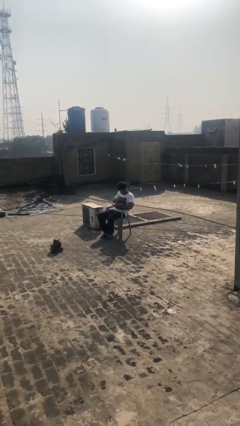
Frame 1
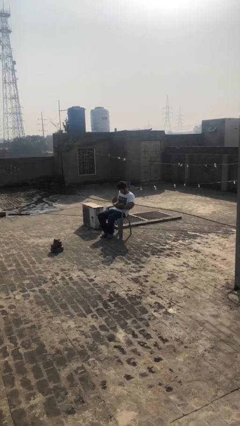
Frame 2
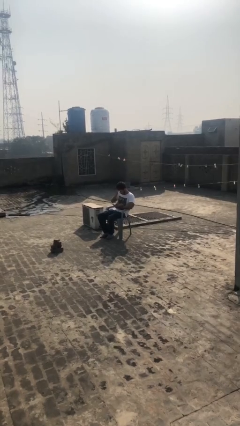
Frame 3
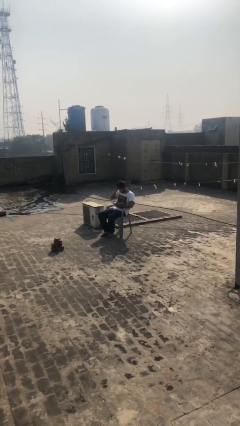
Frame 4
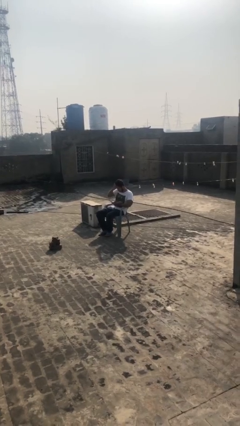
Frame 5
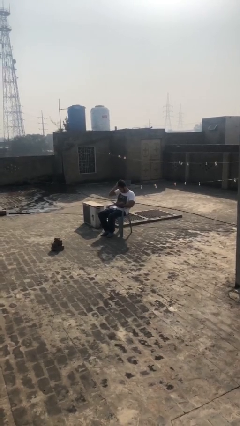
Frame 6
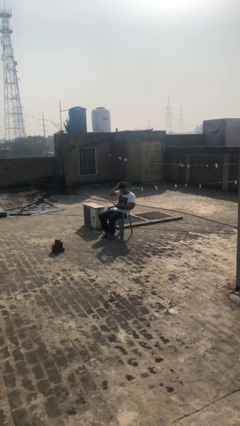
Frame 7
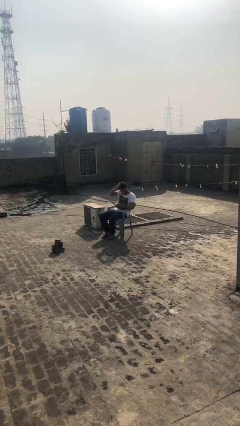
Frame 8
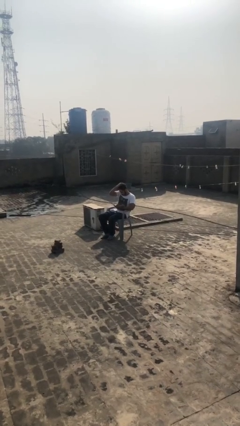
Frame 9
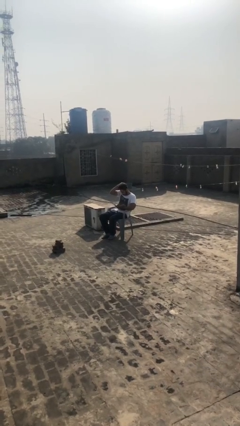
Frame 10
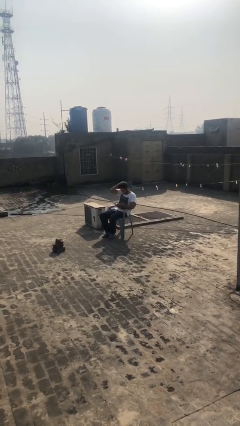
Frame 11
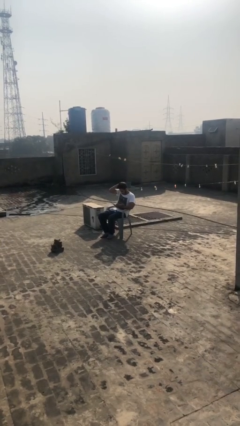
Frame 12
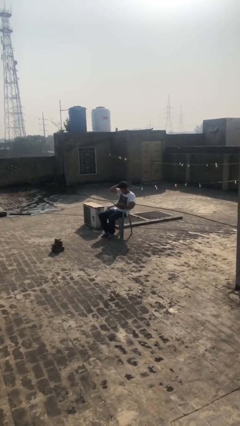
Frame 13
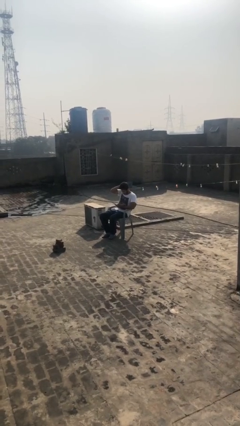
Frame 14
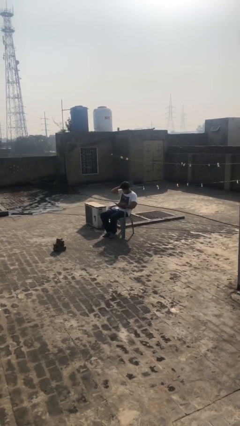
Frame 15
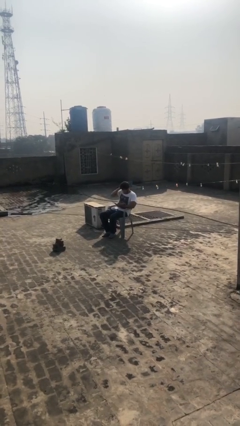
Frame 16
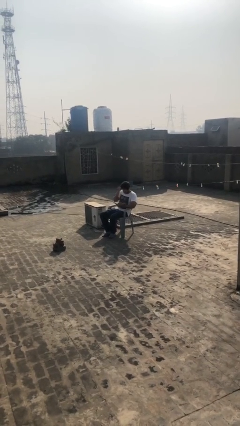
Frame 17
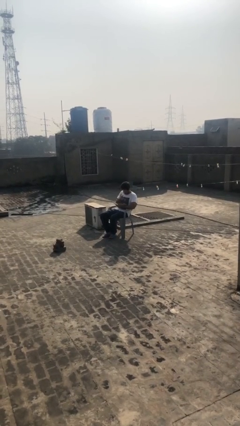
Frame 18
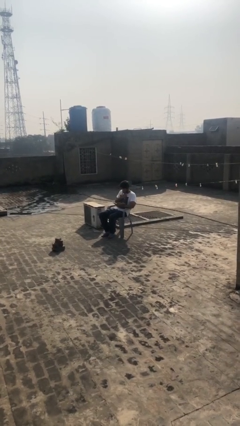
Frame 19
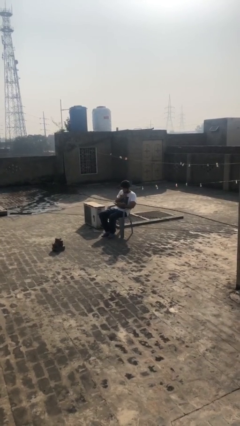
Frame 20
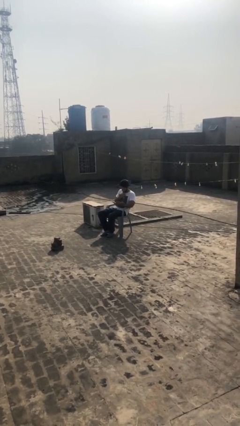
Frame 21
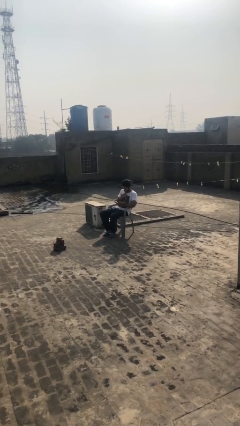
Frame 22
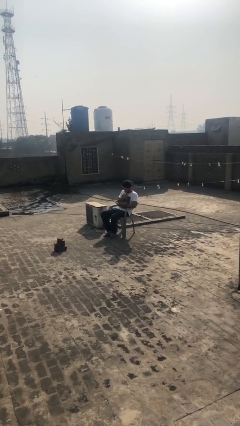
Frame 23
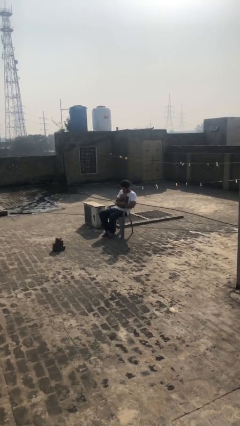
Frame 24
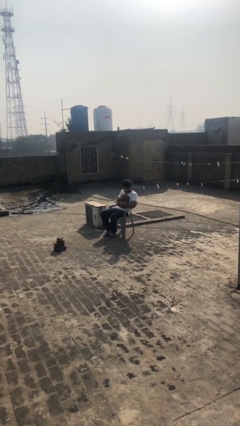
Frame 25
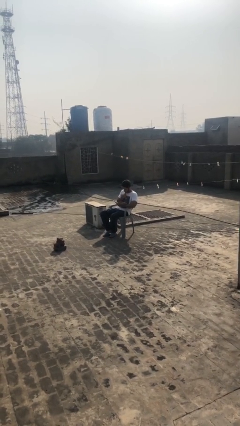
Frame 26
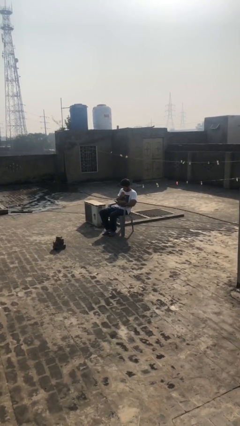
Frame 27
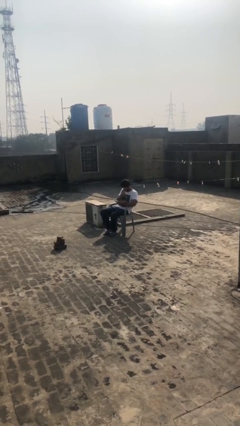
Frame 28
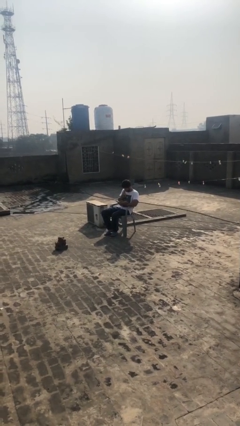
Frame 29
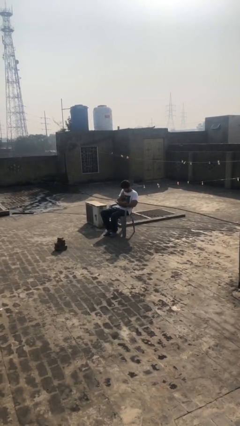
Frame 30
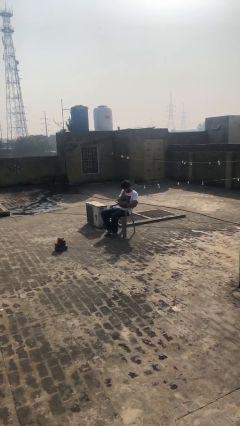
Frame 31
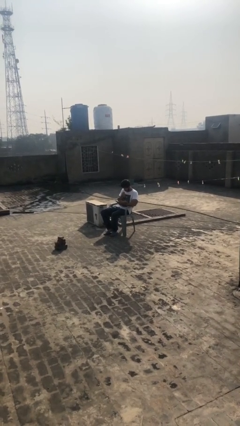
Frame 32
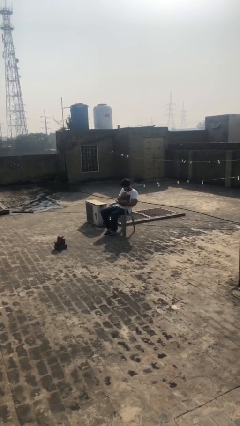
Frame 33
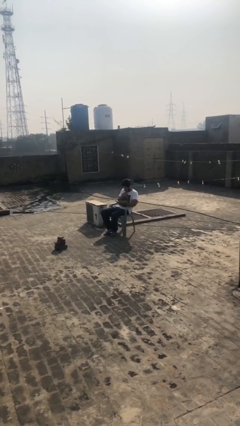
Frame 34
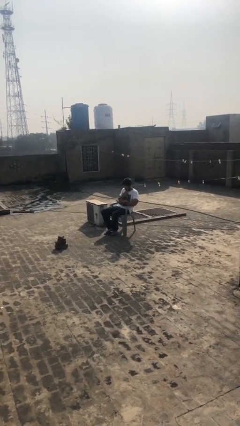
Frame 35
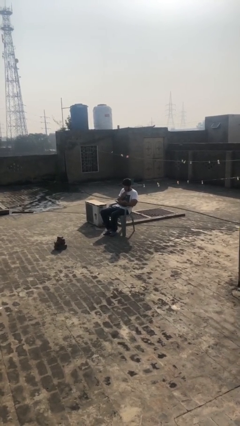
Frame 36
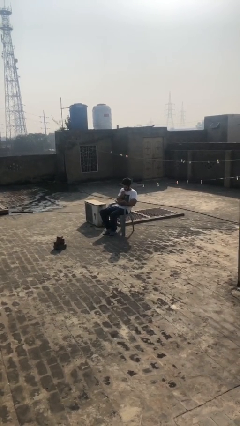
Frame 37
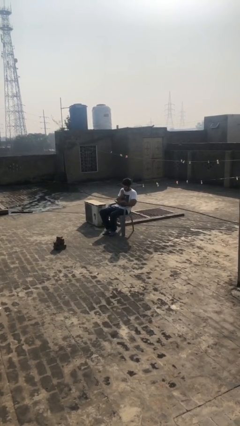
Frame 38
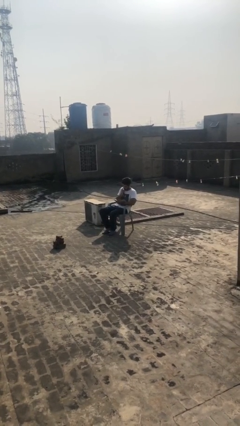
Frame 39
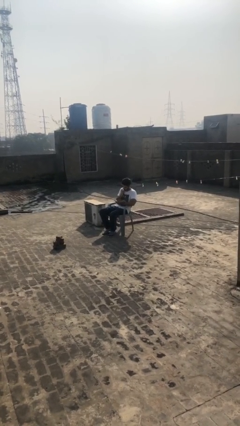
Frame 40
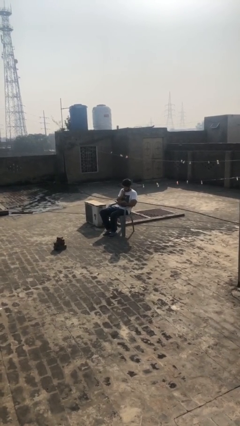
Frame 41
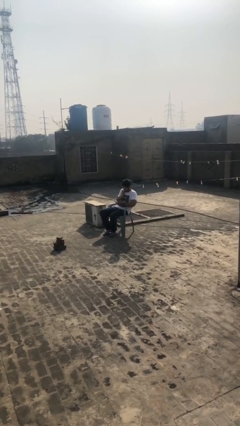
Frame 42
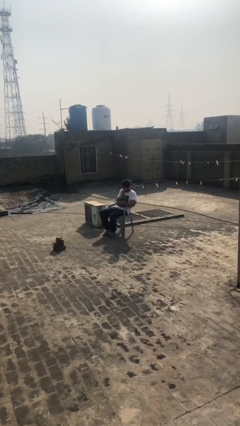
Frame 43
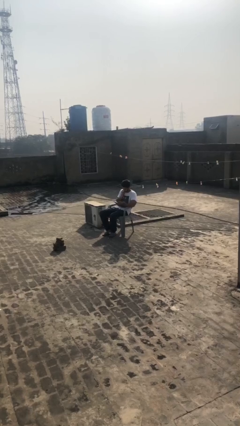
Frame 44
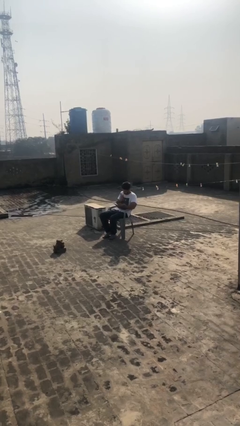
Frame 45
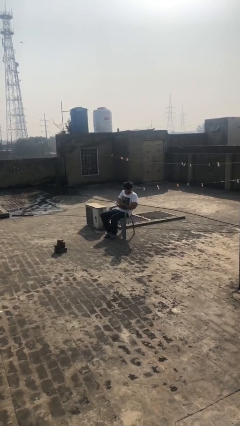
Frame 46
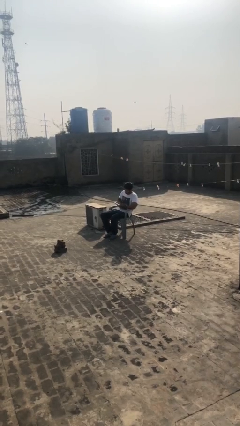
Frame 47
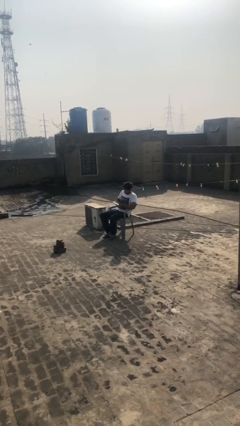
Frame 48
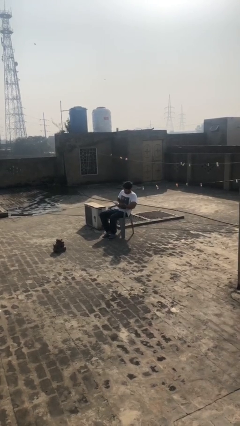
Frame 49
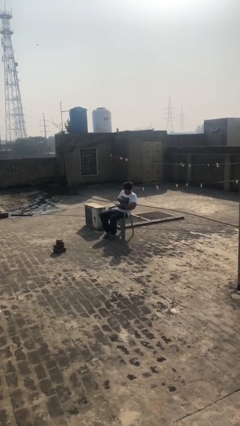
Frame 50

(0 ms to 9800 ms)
person reads document

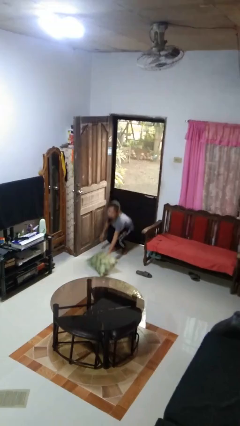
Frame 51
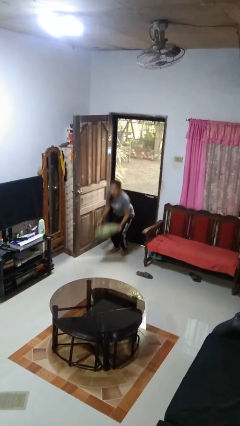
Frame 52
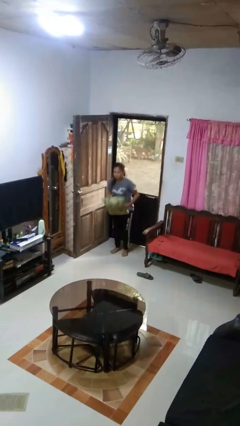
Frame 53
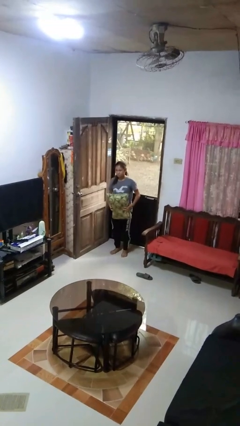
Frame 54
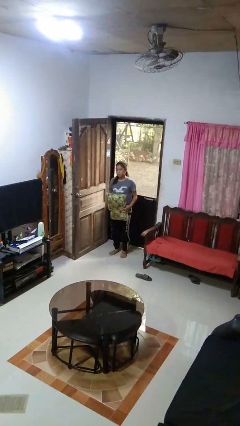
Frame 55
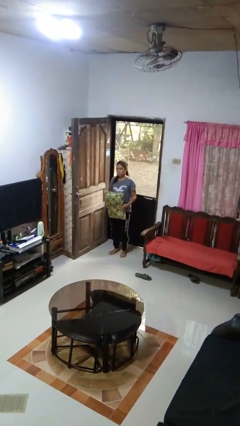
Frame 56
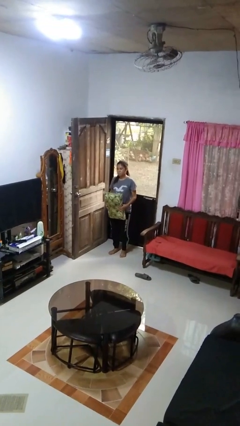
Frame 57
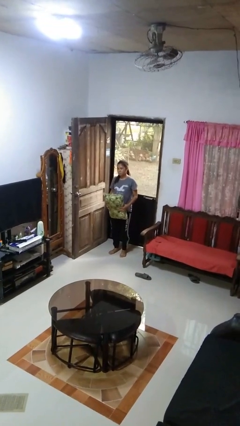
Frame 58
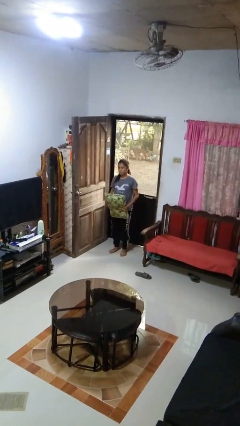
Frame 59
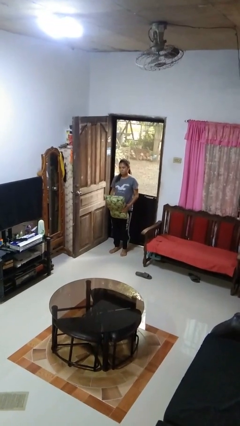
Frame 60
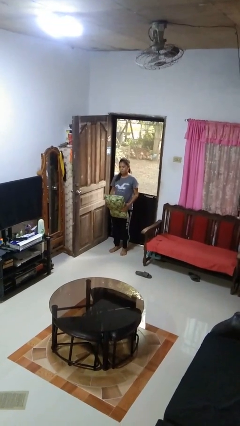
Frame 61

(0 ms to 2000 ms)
person picks up object from floor

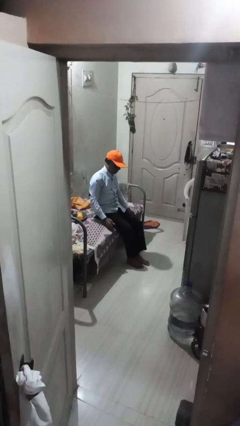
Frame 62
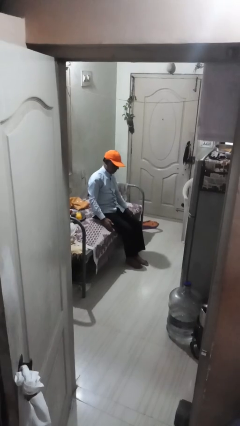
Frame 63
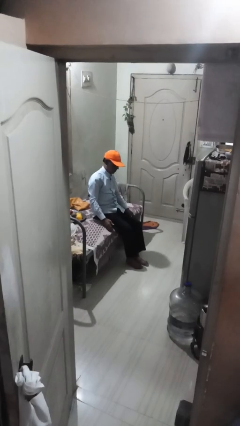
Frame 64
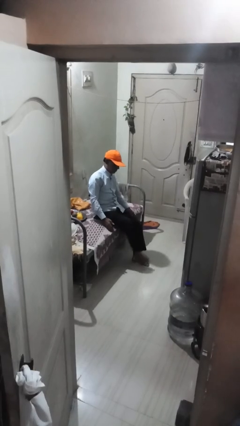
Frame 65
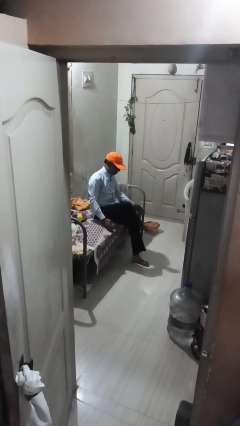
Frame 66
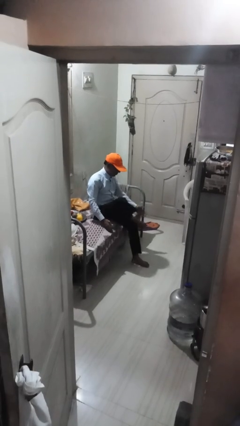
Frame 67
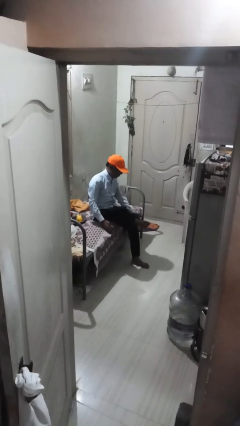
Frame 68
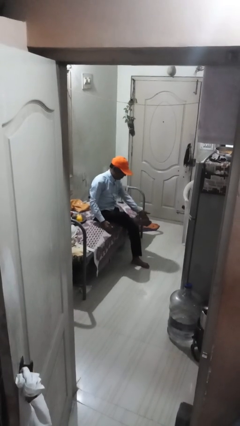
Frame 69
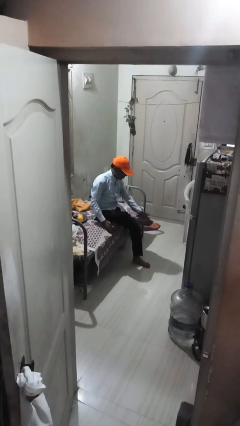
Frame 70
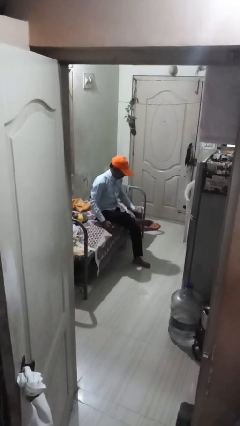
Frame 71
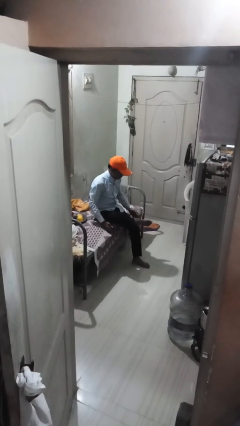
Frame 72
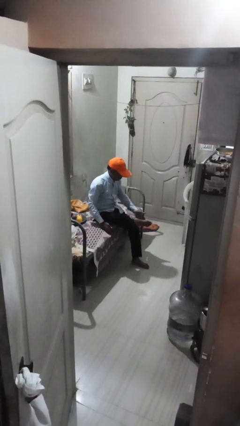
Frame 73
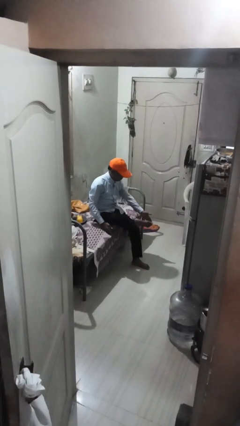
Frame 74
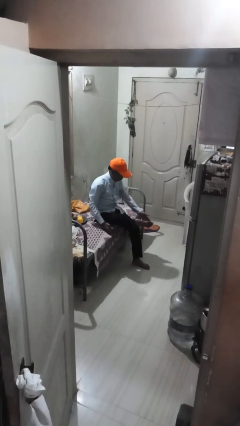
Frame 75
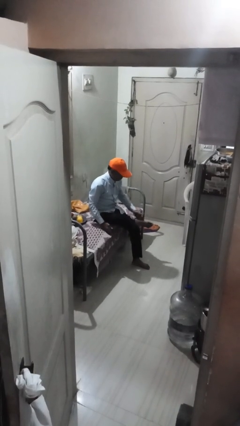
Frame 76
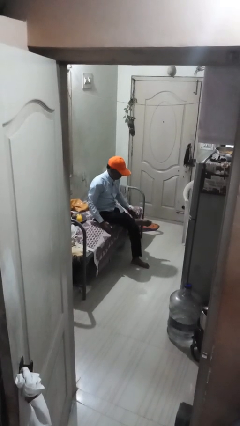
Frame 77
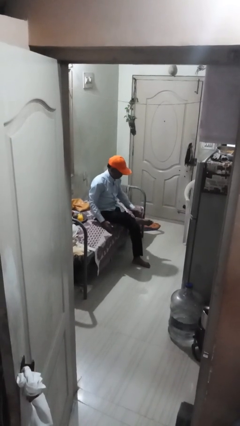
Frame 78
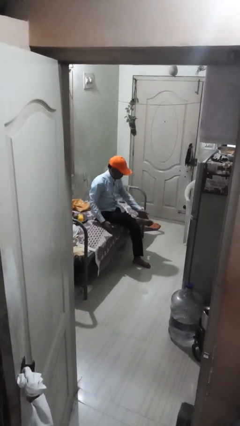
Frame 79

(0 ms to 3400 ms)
person rubs foot

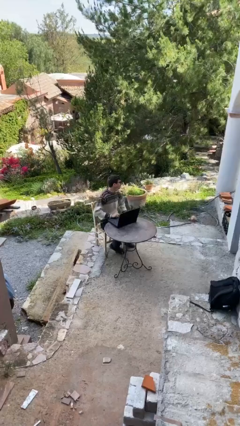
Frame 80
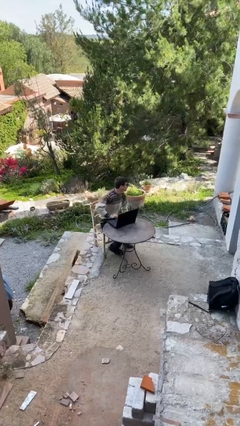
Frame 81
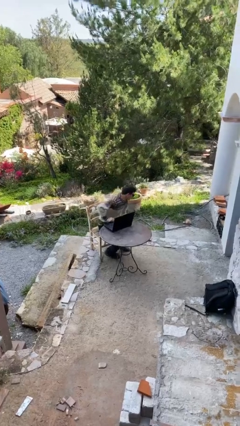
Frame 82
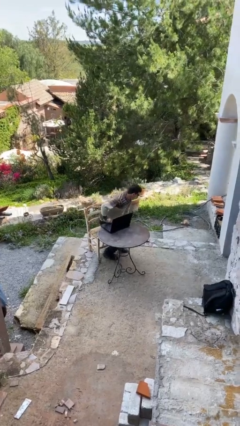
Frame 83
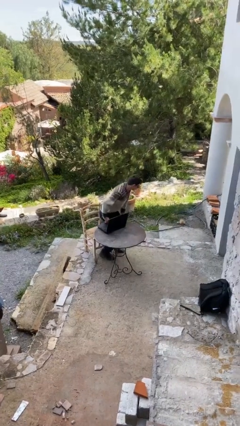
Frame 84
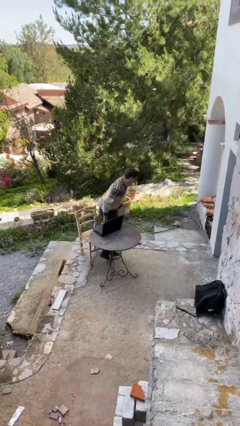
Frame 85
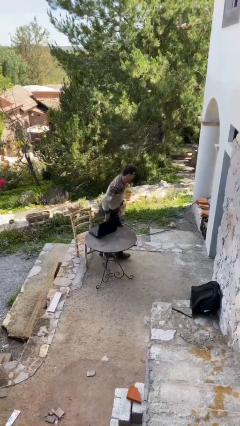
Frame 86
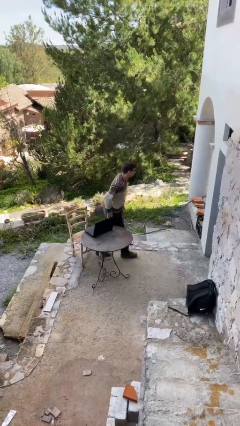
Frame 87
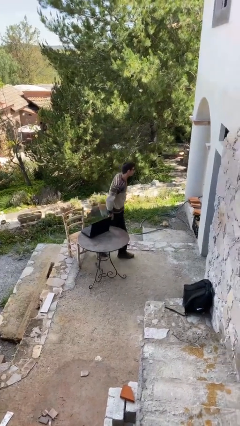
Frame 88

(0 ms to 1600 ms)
person stands up

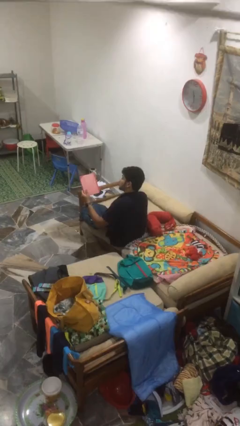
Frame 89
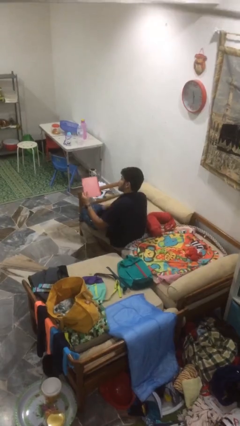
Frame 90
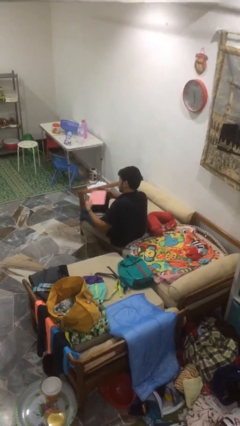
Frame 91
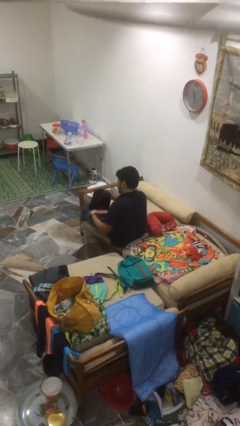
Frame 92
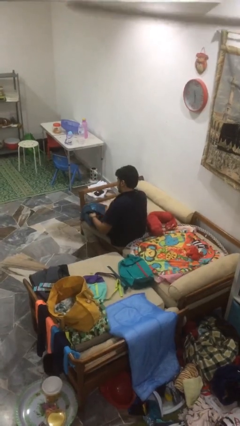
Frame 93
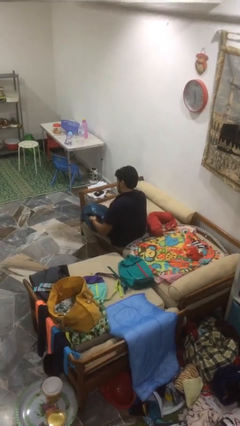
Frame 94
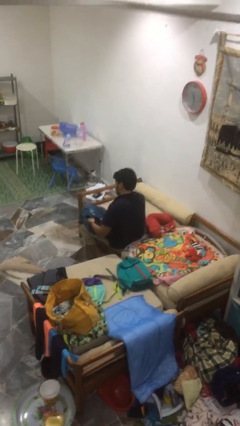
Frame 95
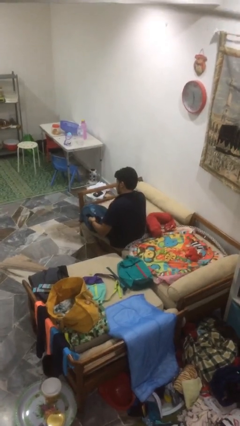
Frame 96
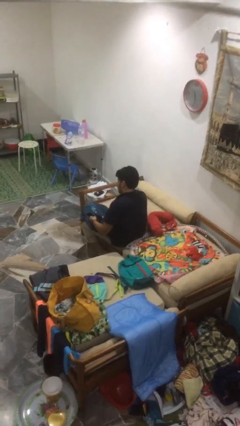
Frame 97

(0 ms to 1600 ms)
person puts object into bag
